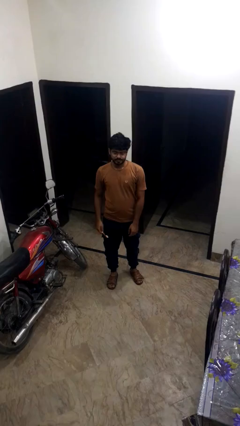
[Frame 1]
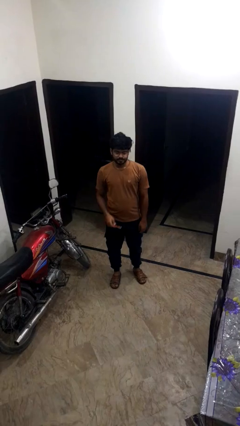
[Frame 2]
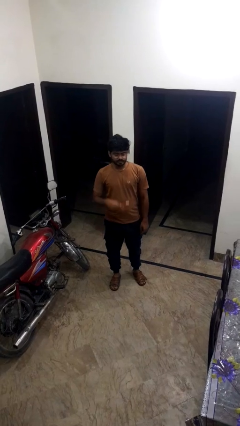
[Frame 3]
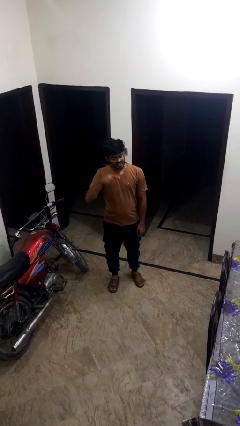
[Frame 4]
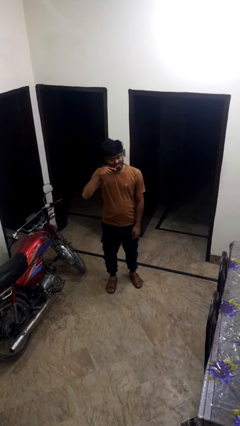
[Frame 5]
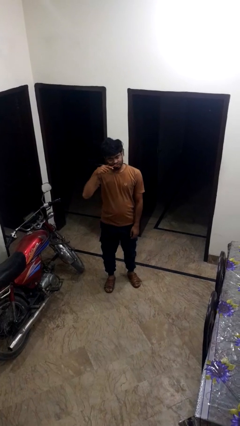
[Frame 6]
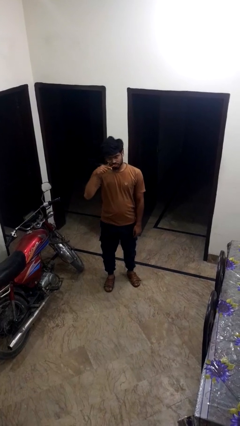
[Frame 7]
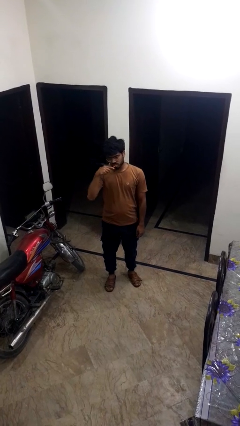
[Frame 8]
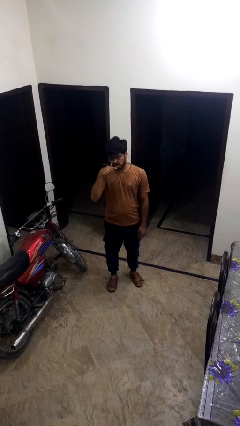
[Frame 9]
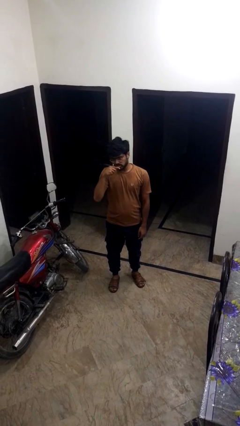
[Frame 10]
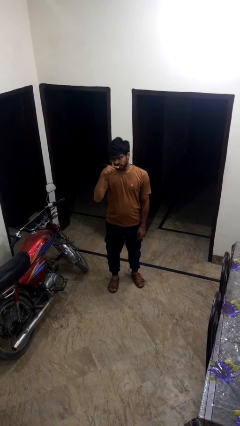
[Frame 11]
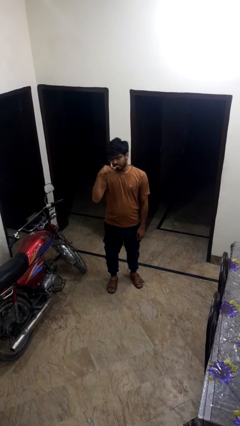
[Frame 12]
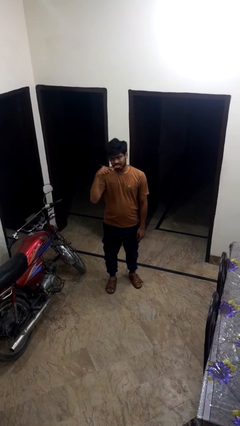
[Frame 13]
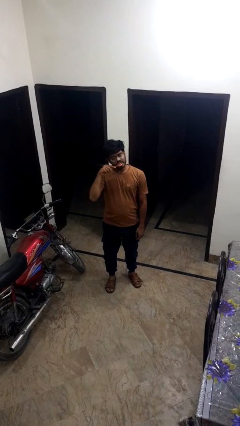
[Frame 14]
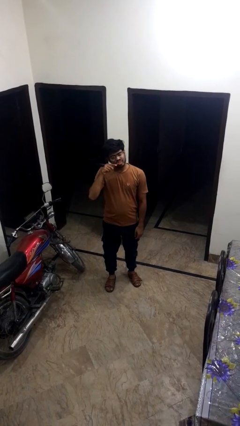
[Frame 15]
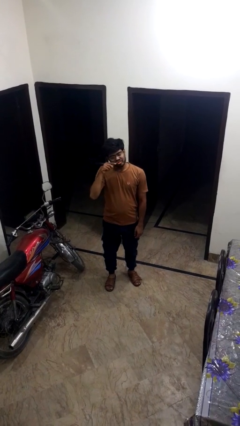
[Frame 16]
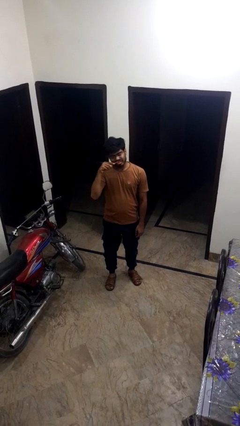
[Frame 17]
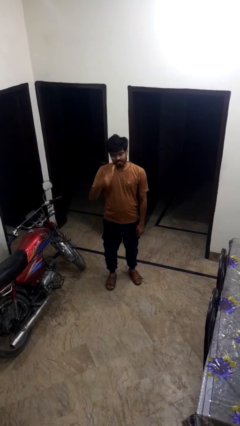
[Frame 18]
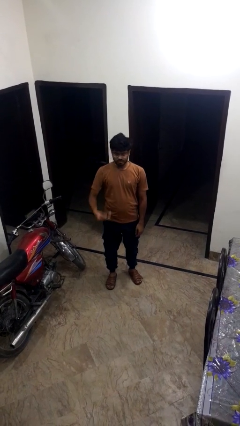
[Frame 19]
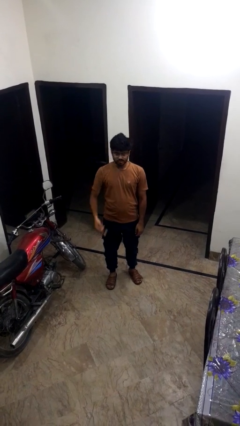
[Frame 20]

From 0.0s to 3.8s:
person brushes teeth

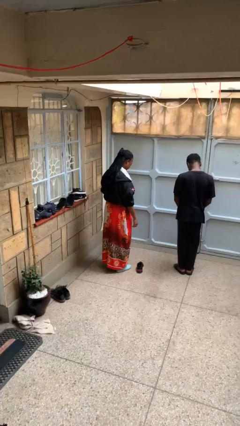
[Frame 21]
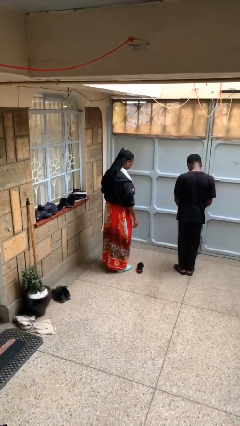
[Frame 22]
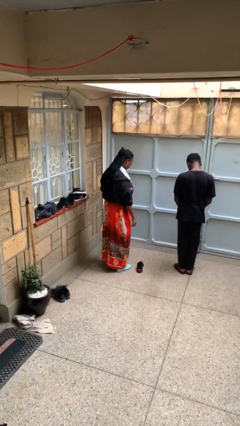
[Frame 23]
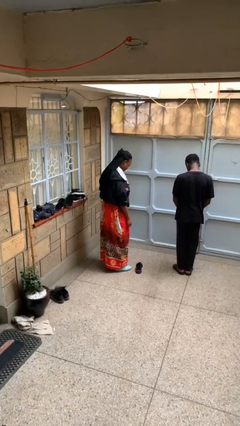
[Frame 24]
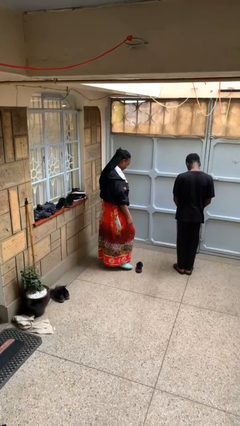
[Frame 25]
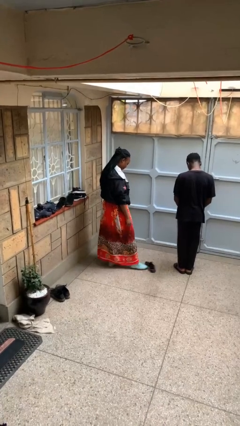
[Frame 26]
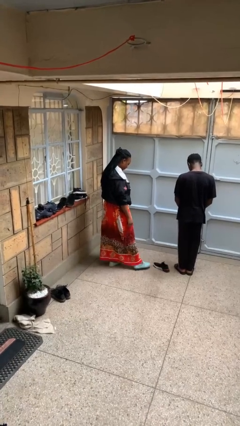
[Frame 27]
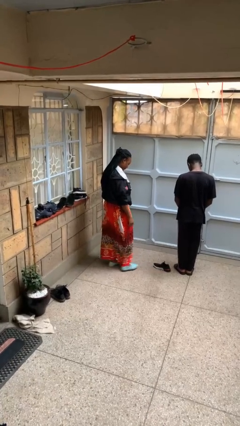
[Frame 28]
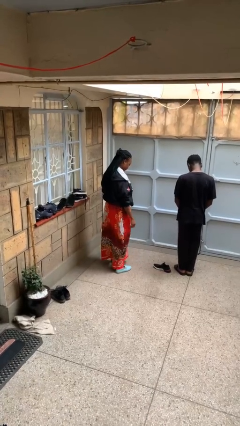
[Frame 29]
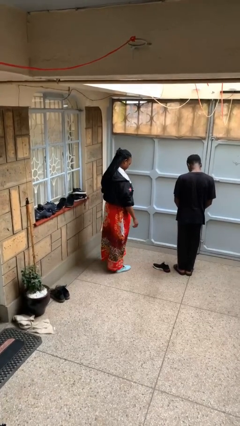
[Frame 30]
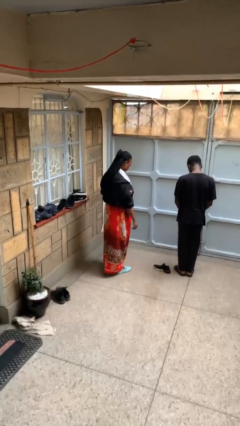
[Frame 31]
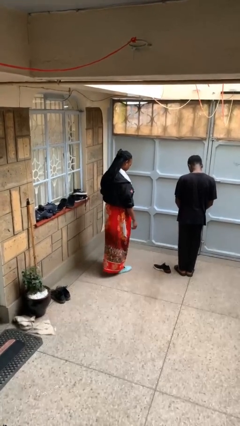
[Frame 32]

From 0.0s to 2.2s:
person kicks object to person

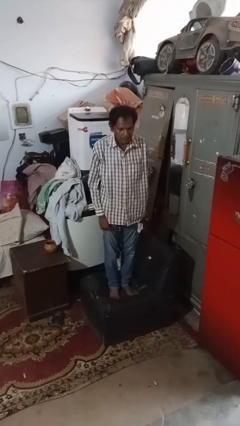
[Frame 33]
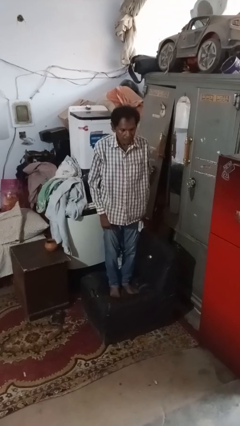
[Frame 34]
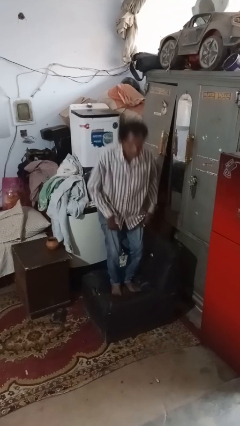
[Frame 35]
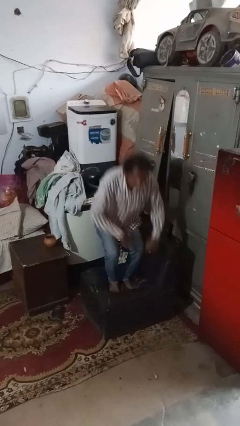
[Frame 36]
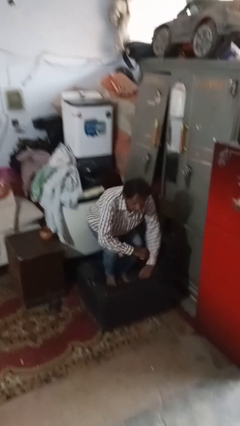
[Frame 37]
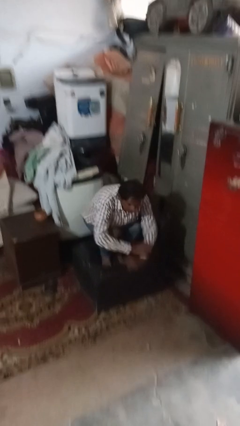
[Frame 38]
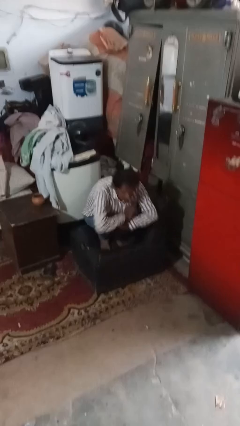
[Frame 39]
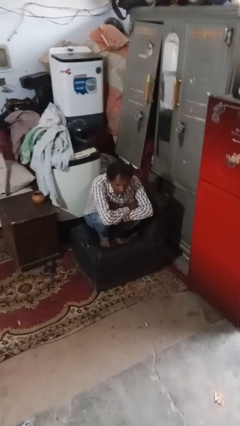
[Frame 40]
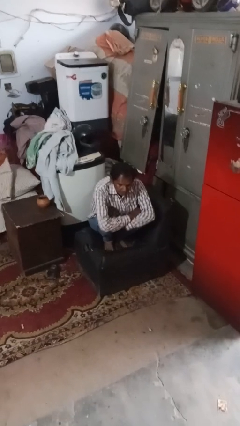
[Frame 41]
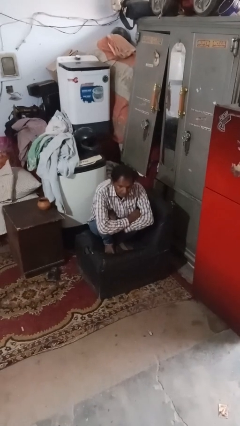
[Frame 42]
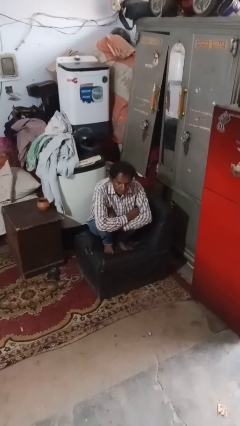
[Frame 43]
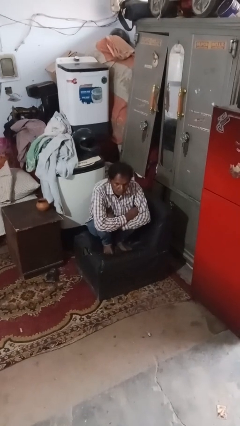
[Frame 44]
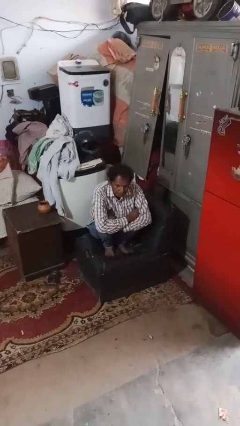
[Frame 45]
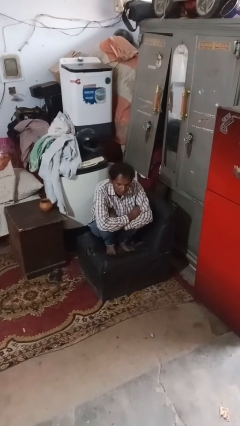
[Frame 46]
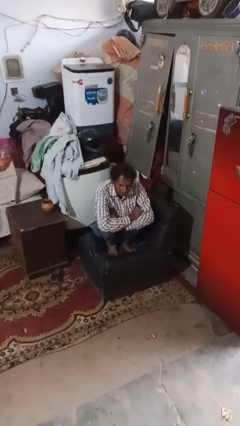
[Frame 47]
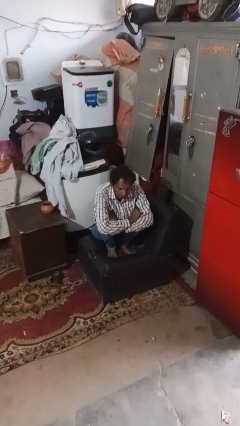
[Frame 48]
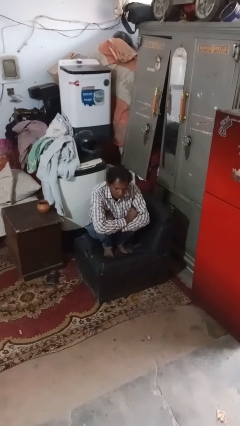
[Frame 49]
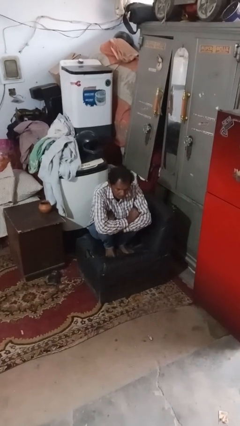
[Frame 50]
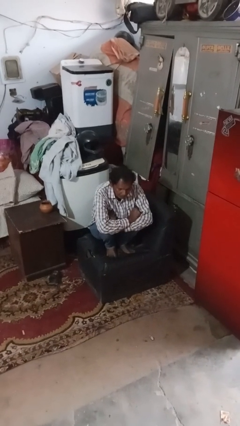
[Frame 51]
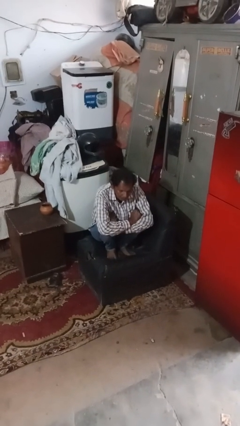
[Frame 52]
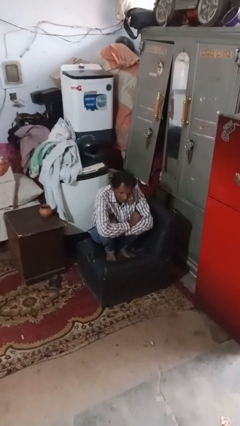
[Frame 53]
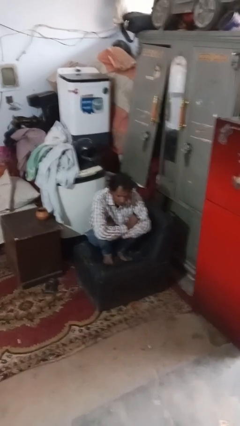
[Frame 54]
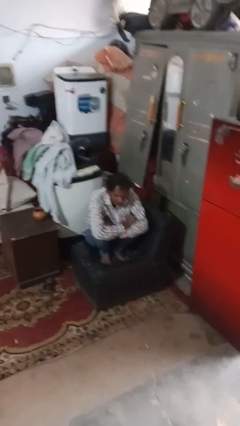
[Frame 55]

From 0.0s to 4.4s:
person lies down on couch

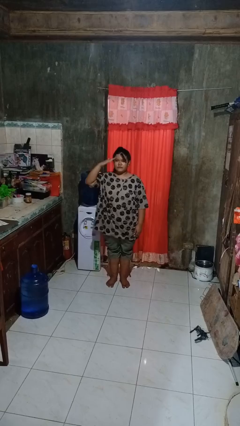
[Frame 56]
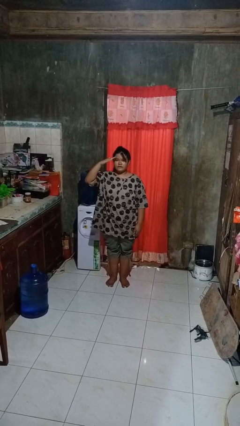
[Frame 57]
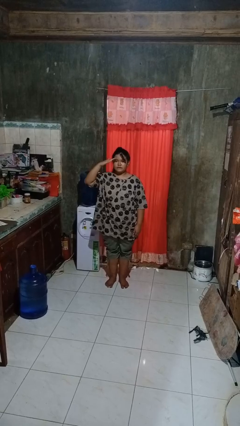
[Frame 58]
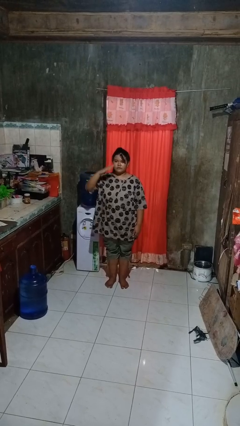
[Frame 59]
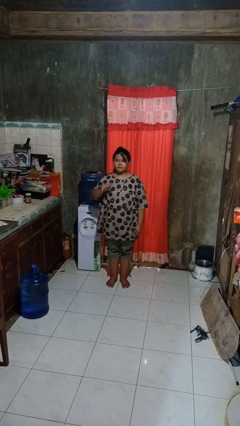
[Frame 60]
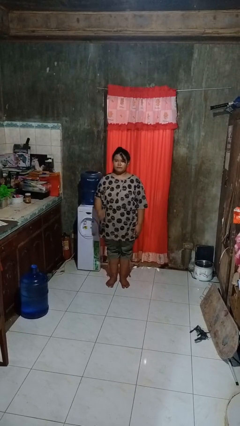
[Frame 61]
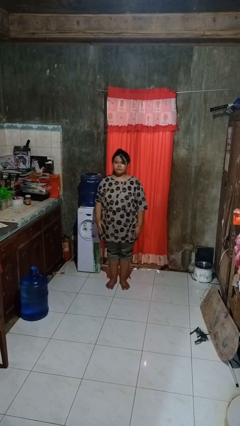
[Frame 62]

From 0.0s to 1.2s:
person salutes

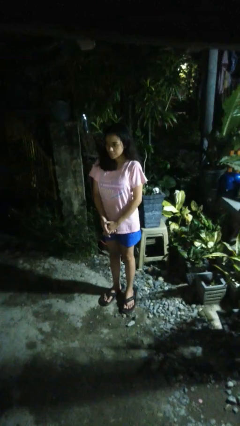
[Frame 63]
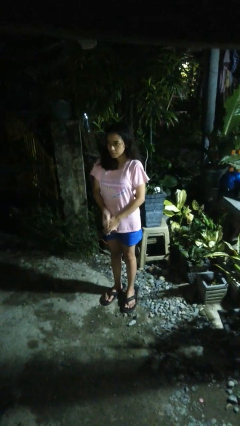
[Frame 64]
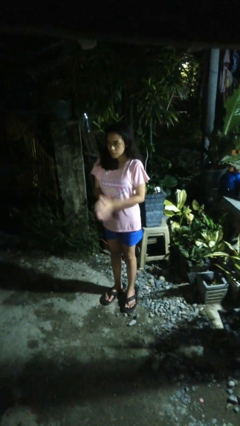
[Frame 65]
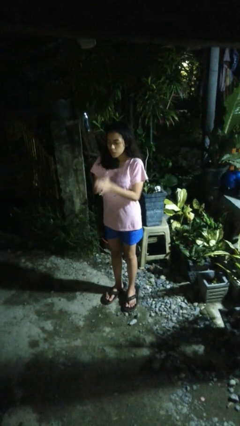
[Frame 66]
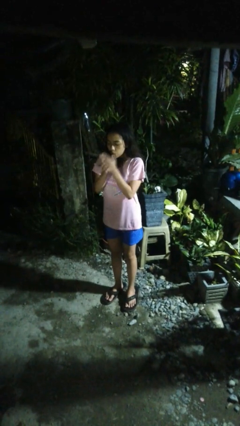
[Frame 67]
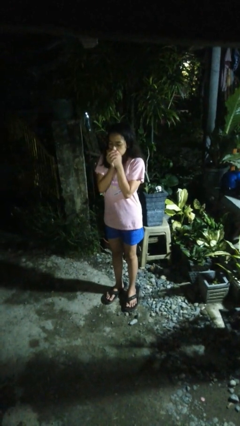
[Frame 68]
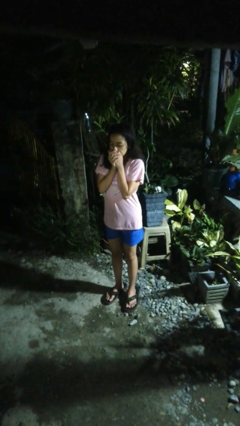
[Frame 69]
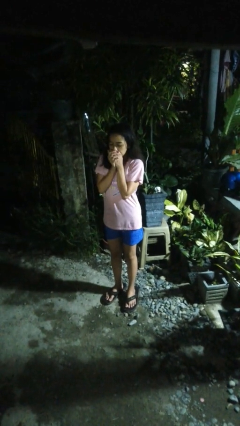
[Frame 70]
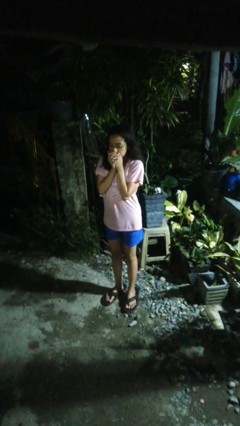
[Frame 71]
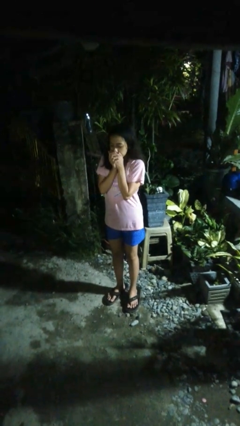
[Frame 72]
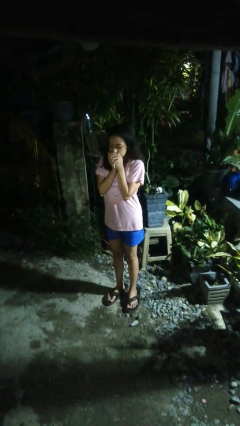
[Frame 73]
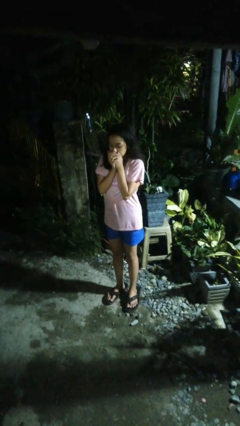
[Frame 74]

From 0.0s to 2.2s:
person blows into hands

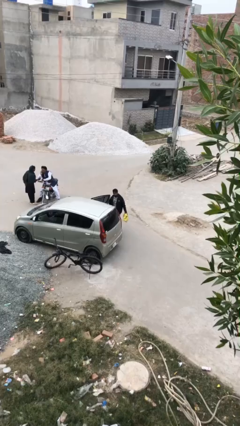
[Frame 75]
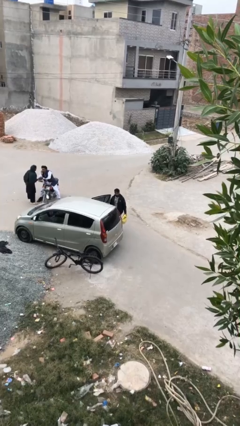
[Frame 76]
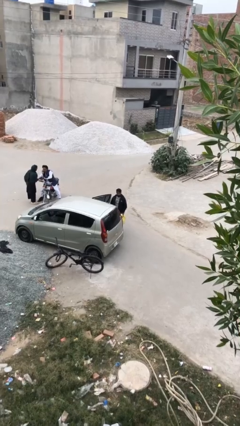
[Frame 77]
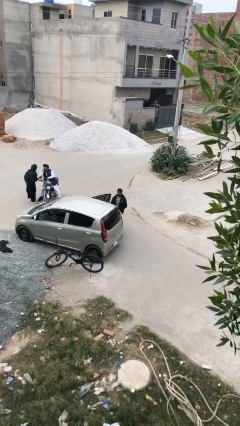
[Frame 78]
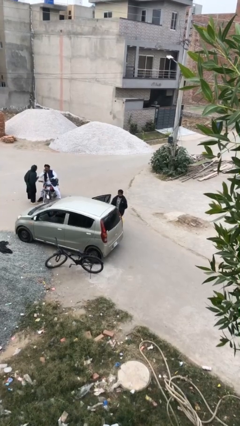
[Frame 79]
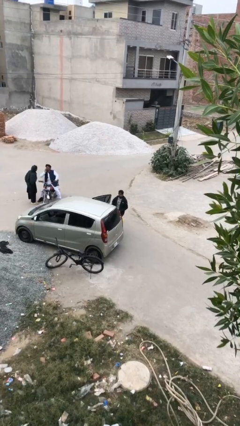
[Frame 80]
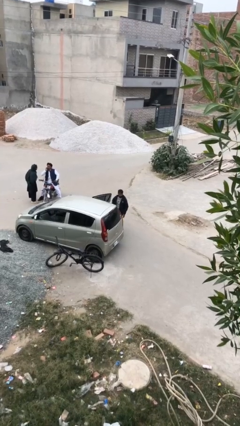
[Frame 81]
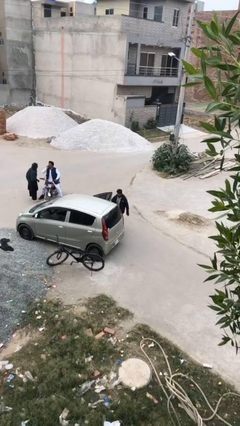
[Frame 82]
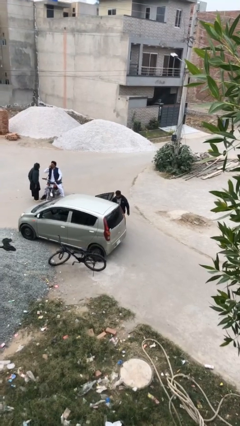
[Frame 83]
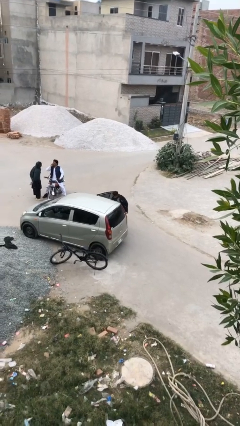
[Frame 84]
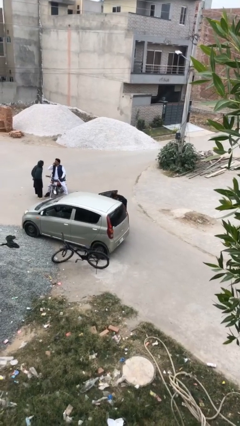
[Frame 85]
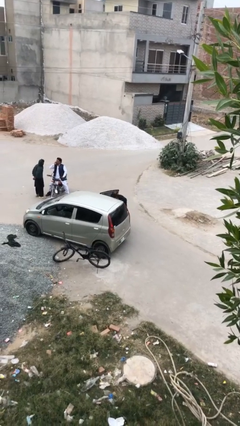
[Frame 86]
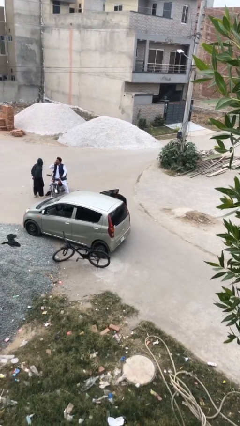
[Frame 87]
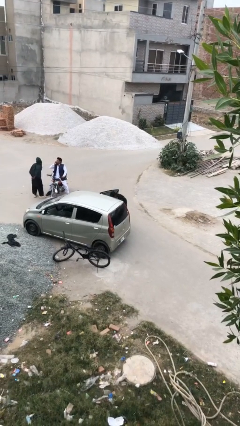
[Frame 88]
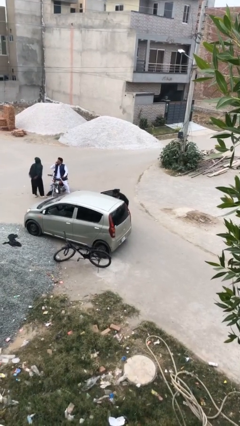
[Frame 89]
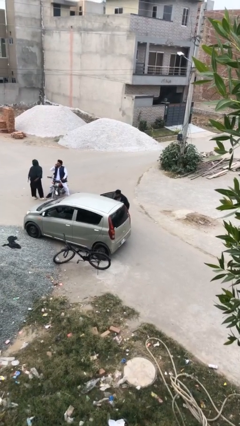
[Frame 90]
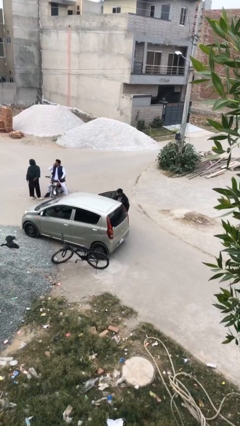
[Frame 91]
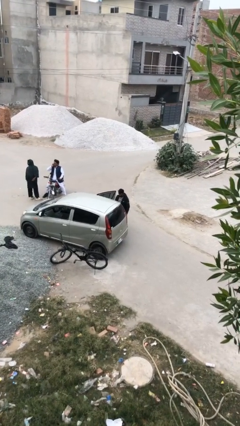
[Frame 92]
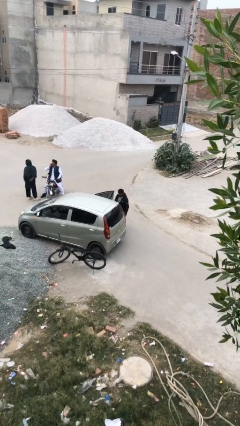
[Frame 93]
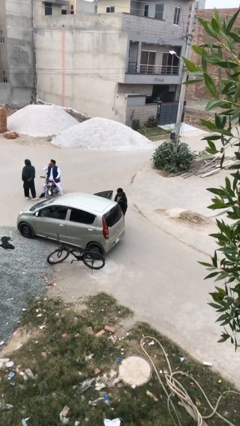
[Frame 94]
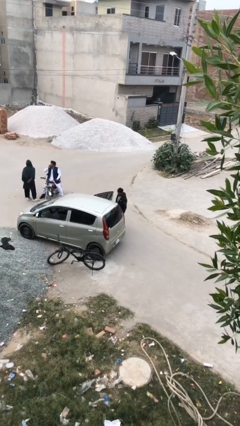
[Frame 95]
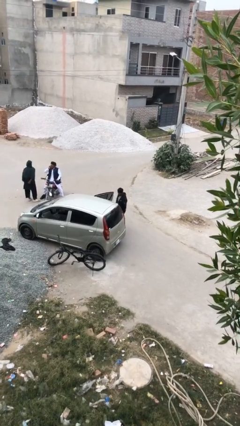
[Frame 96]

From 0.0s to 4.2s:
person loads car
